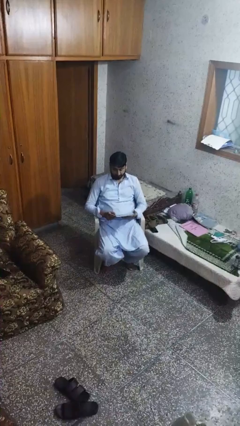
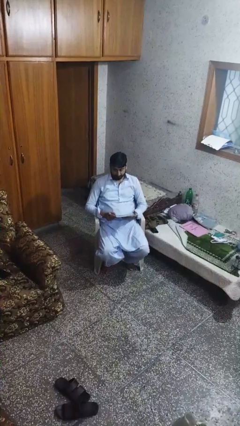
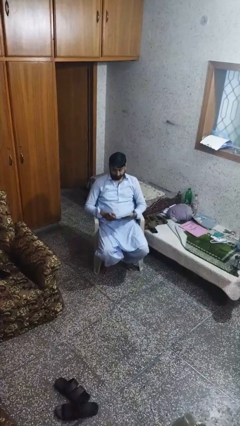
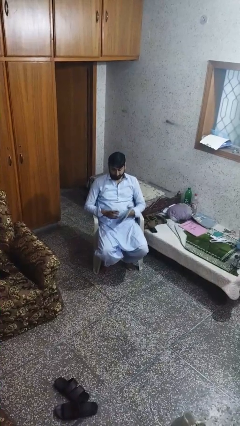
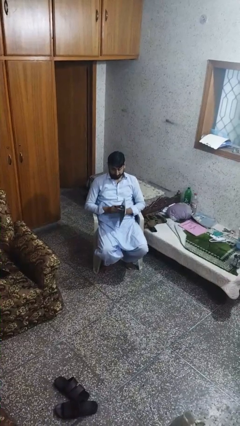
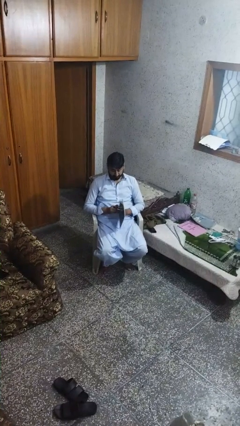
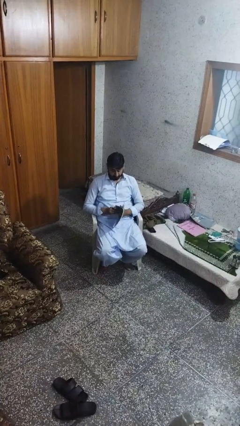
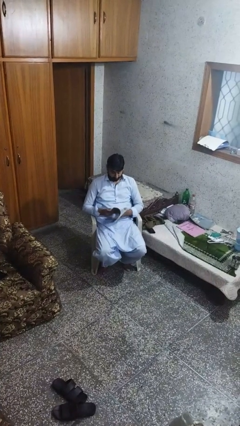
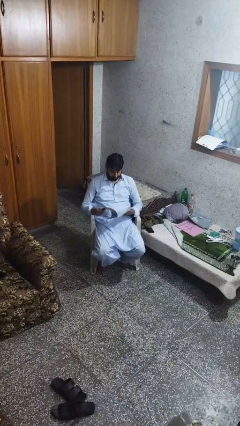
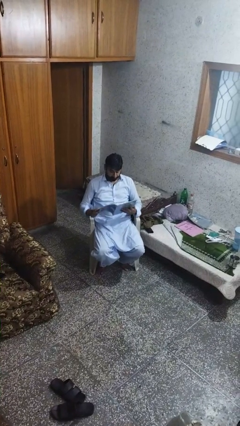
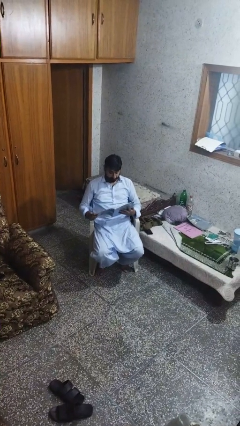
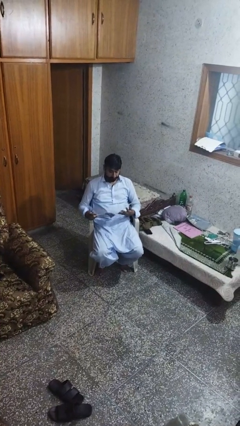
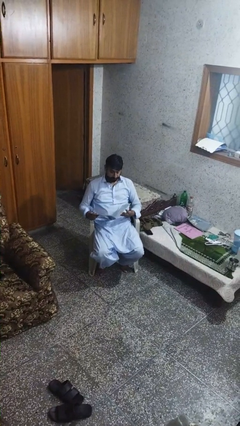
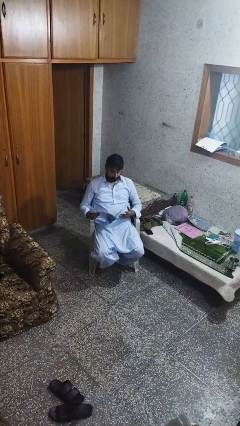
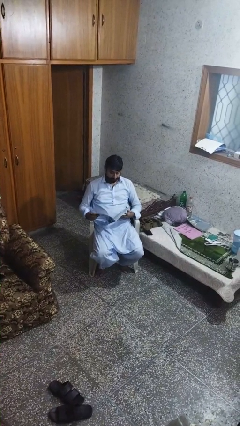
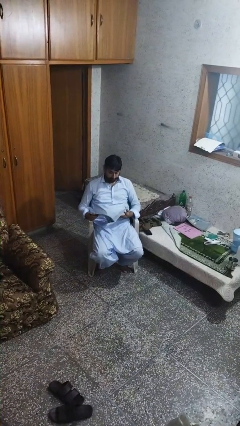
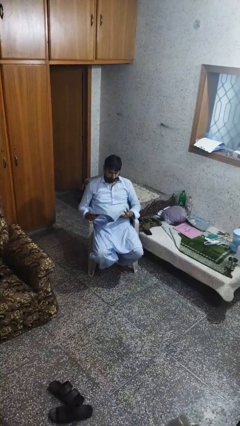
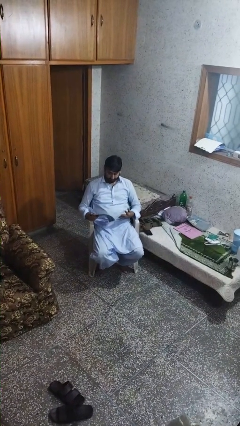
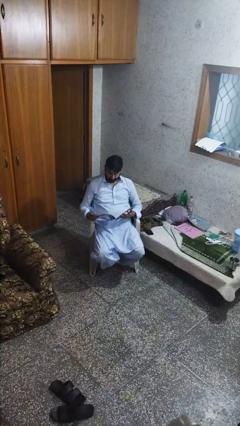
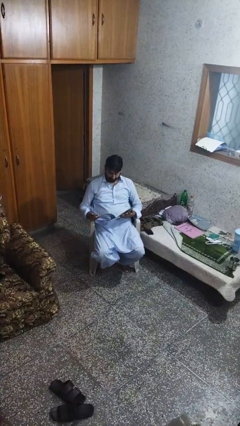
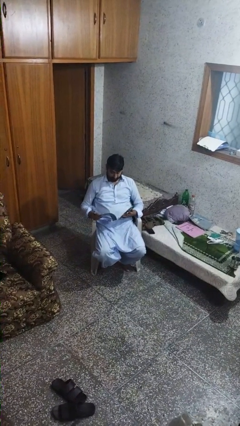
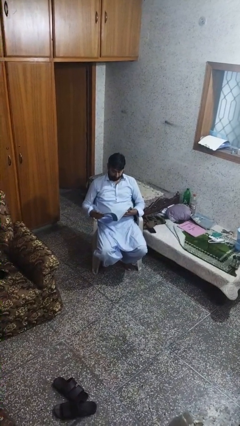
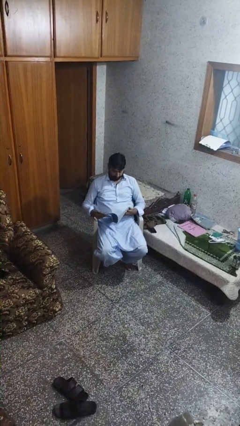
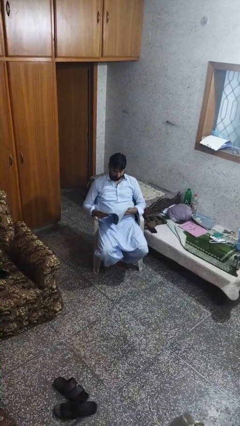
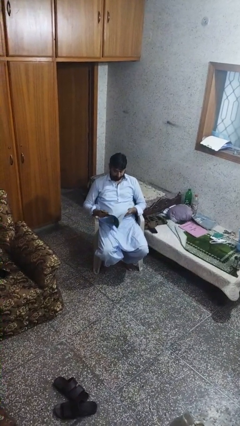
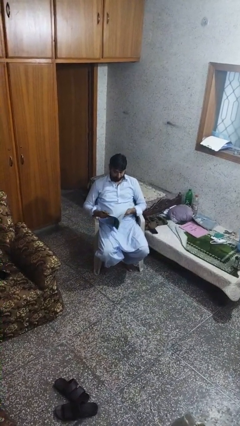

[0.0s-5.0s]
person reads magazine

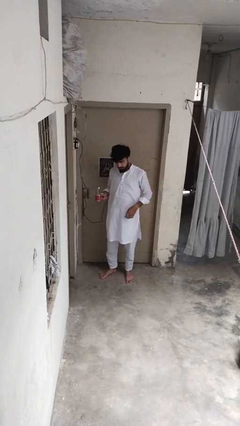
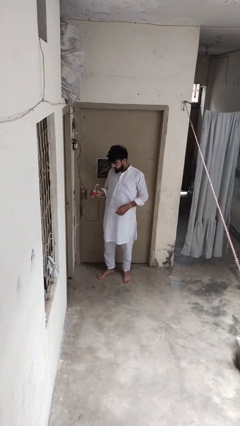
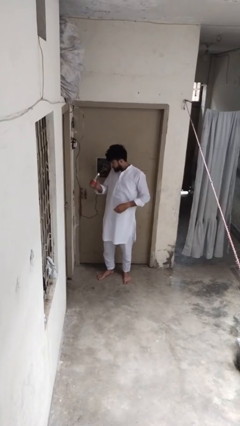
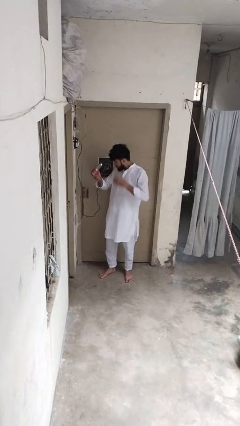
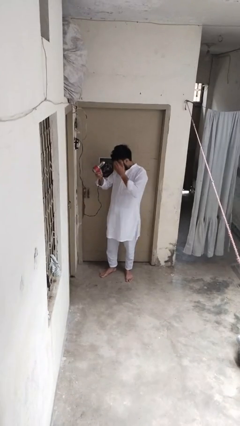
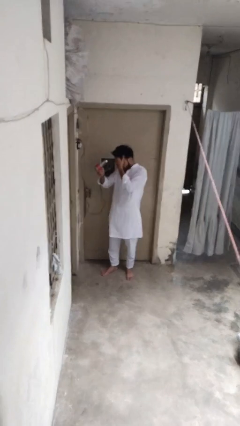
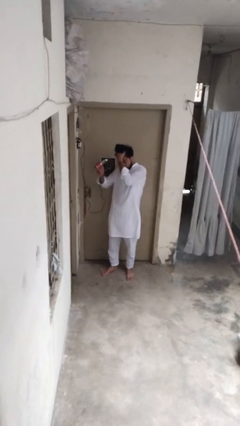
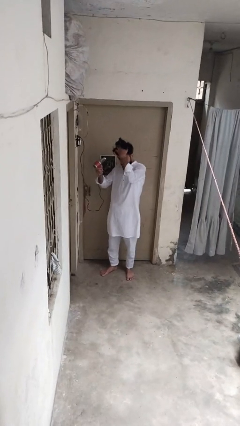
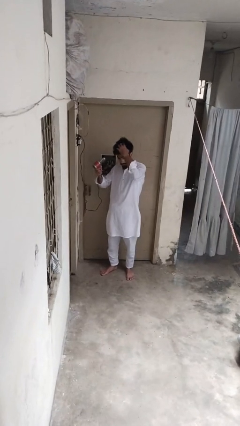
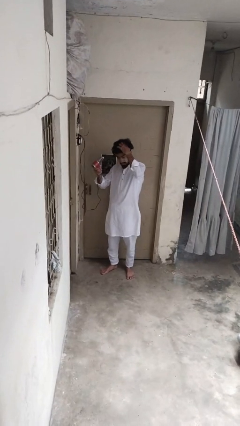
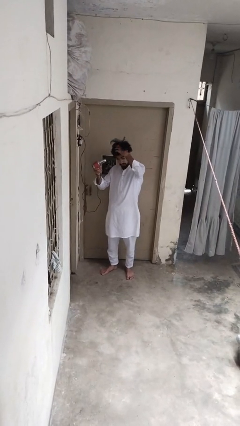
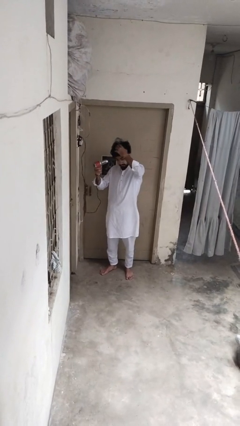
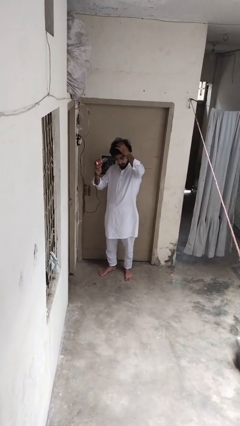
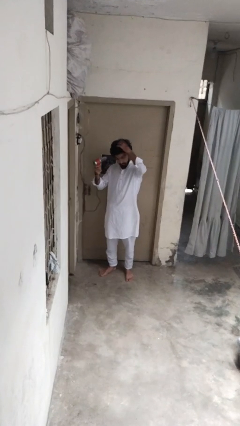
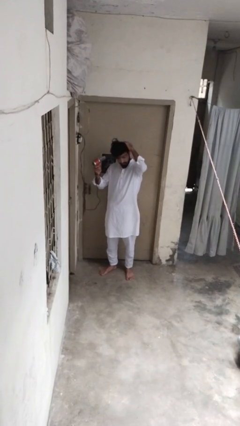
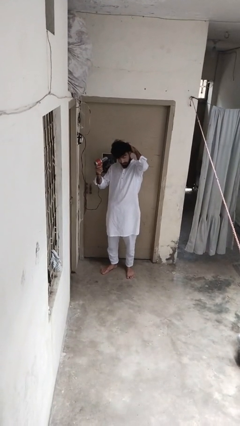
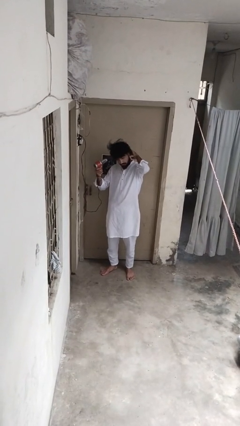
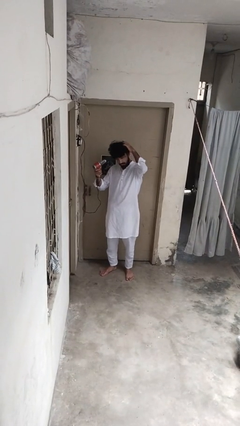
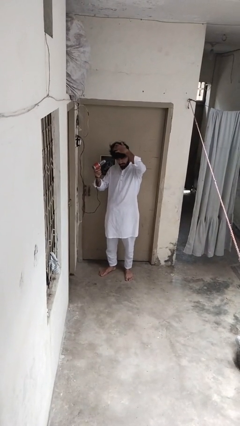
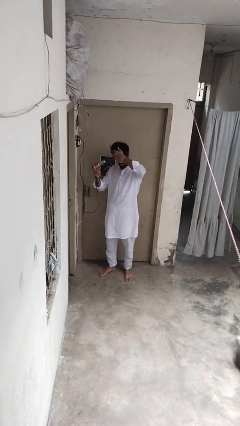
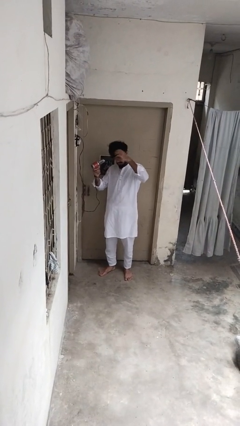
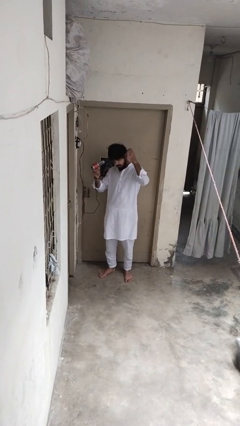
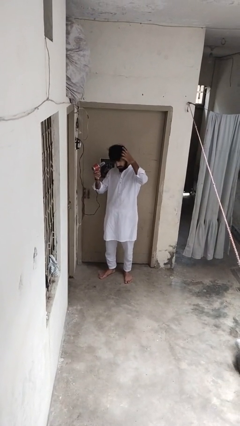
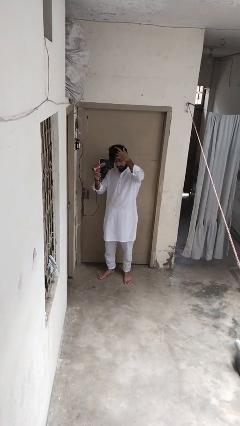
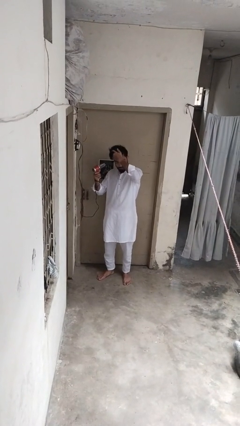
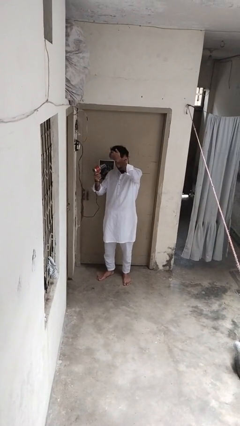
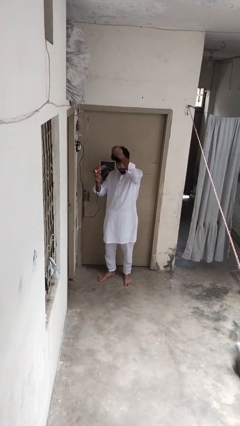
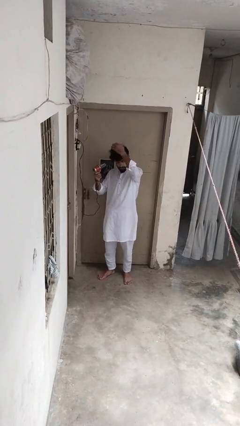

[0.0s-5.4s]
person dries hair with hairdryer
